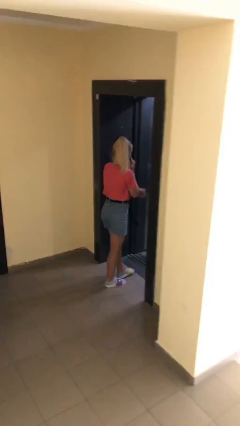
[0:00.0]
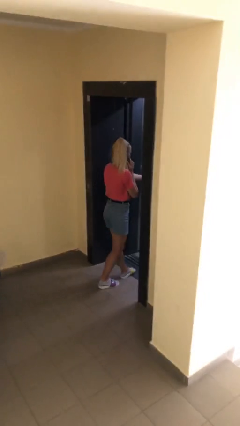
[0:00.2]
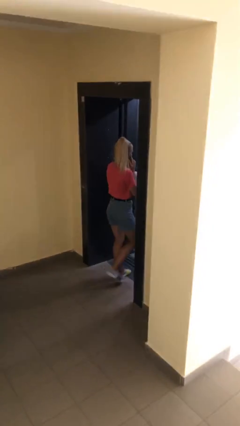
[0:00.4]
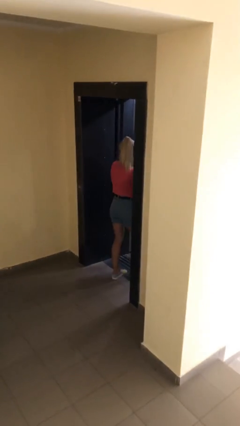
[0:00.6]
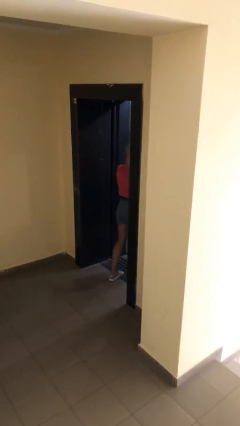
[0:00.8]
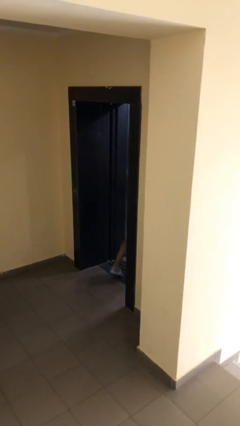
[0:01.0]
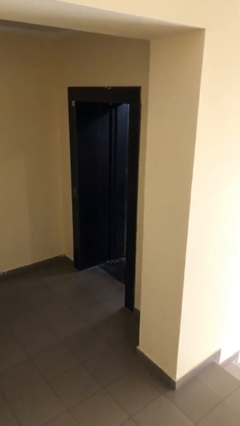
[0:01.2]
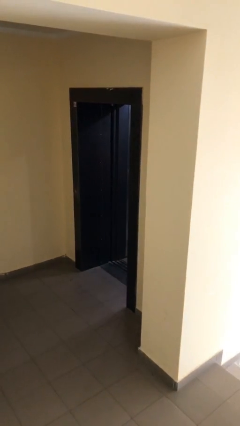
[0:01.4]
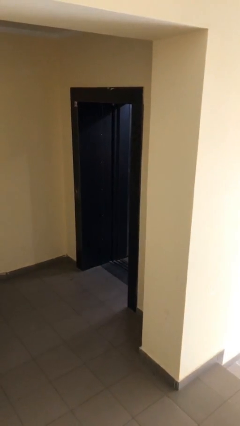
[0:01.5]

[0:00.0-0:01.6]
person exits scene through structure

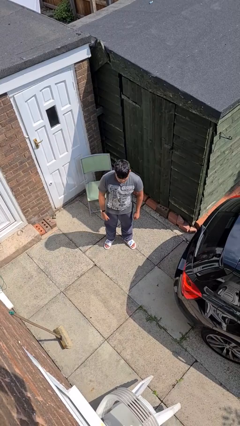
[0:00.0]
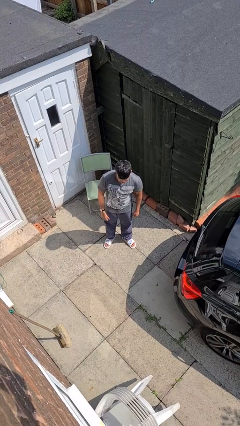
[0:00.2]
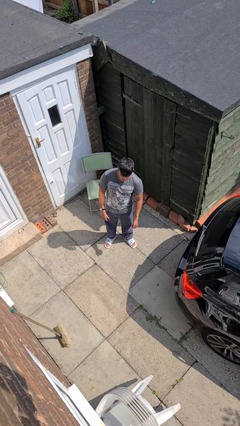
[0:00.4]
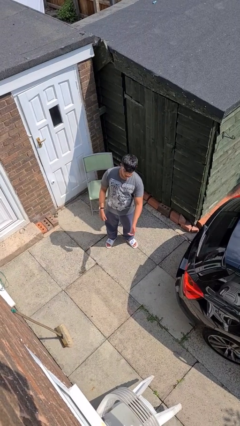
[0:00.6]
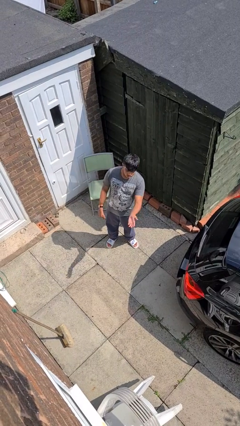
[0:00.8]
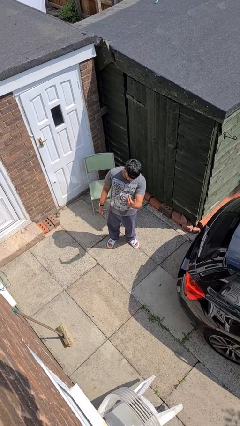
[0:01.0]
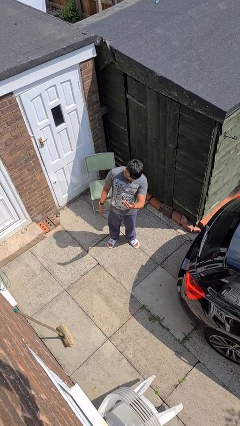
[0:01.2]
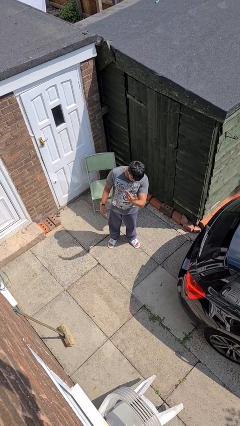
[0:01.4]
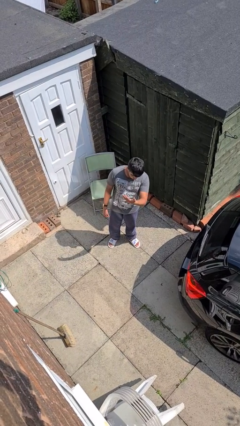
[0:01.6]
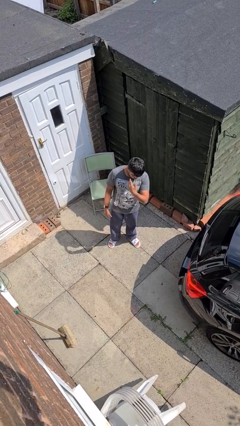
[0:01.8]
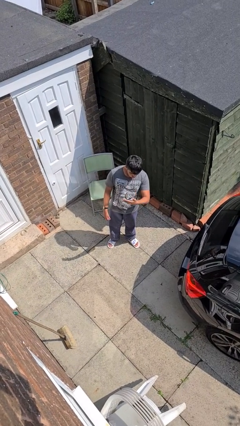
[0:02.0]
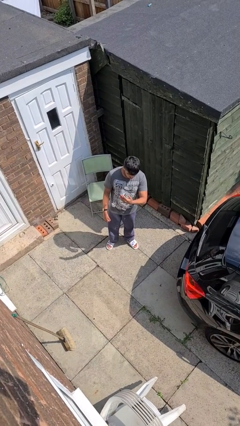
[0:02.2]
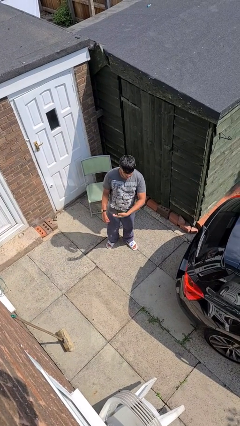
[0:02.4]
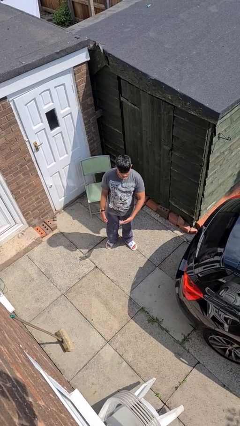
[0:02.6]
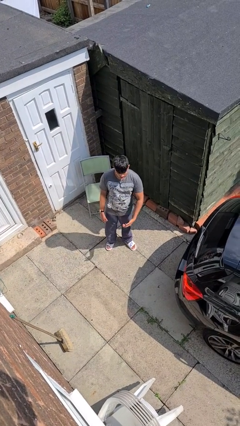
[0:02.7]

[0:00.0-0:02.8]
person gestures come here

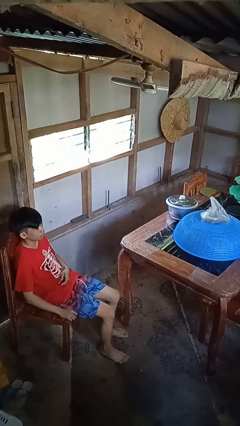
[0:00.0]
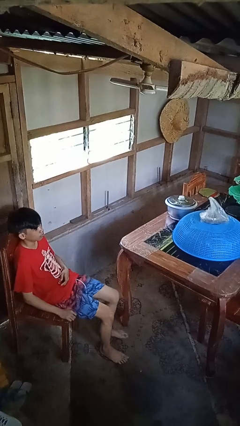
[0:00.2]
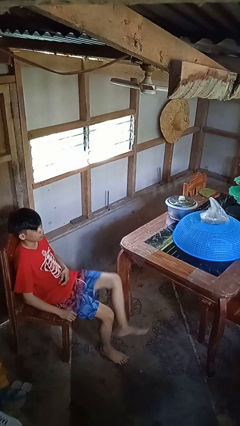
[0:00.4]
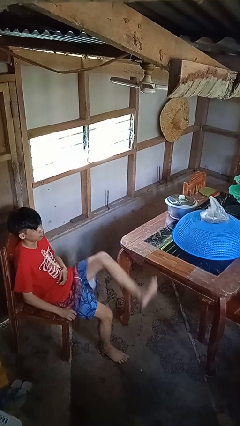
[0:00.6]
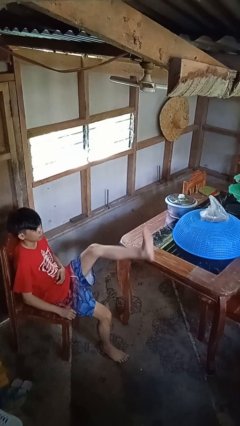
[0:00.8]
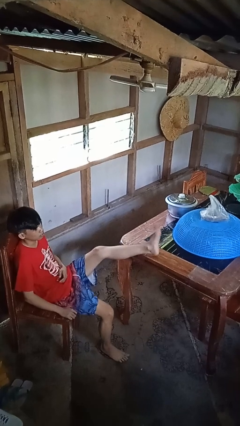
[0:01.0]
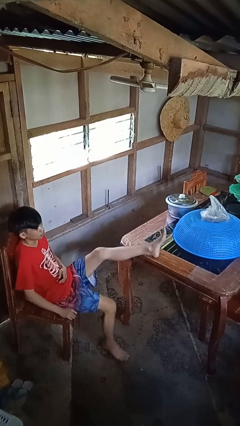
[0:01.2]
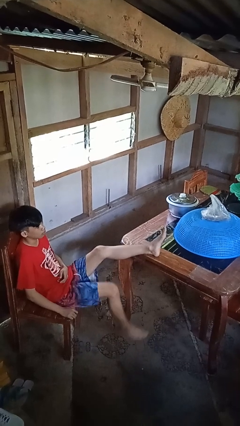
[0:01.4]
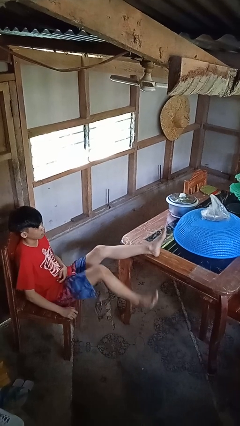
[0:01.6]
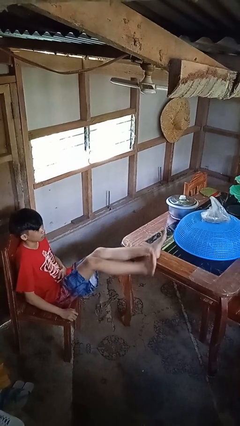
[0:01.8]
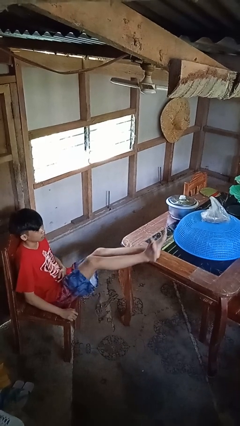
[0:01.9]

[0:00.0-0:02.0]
person puts feet up

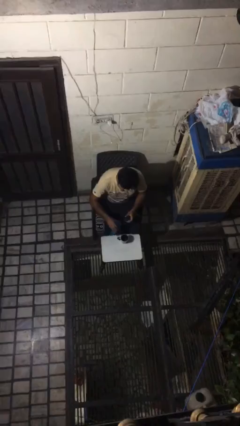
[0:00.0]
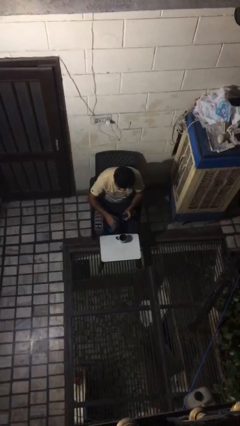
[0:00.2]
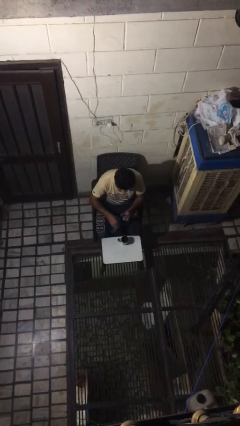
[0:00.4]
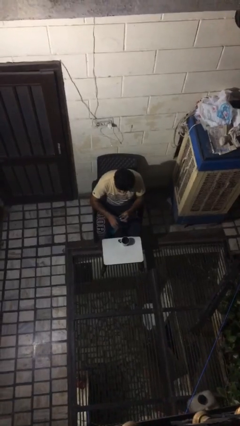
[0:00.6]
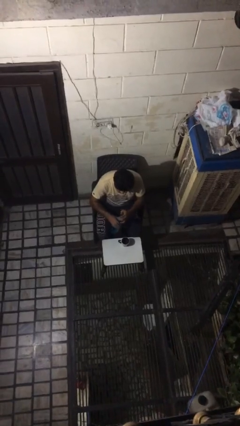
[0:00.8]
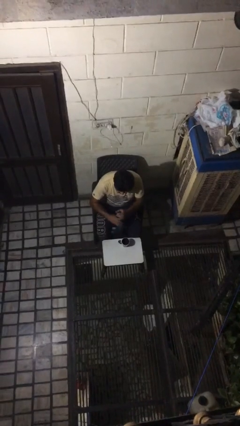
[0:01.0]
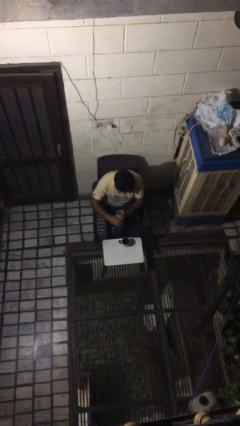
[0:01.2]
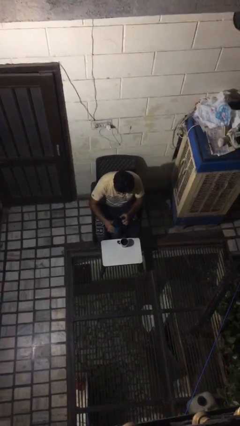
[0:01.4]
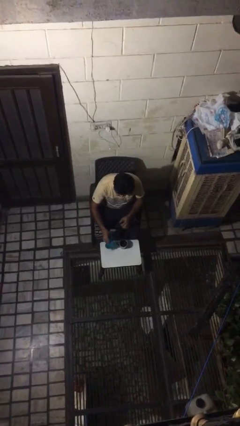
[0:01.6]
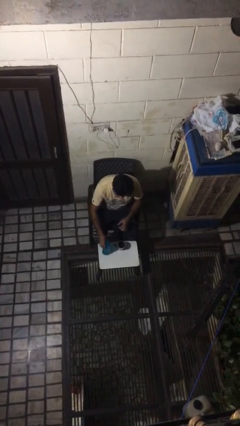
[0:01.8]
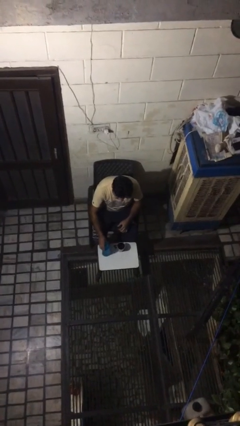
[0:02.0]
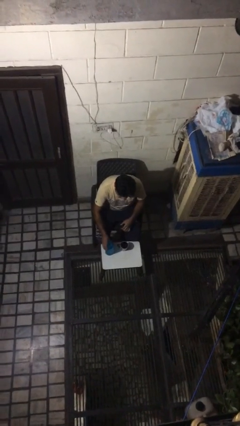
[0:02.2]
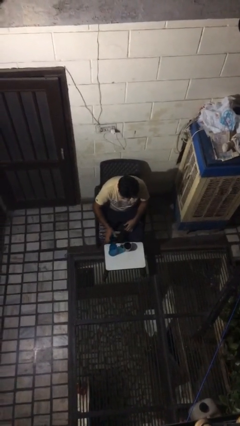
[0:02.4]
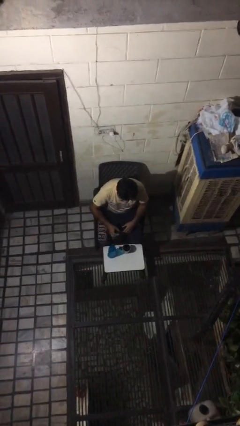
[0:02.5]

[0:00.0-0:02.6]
person screws lid to bottle

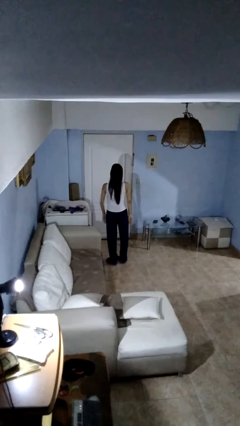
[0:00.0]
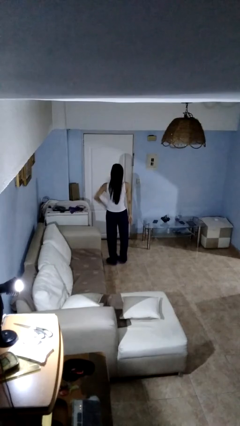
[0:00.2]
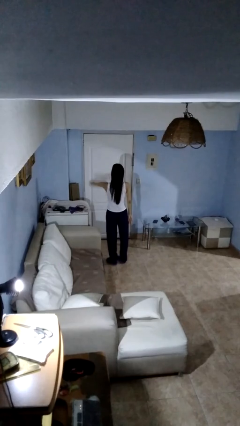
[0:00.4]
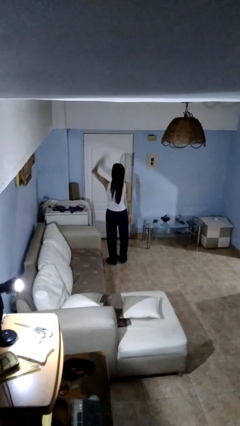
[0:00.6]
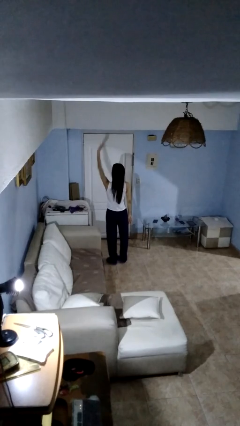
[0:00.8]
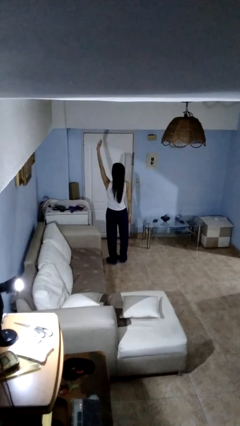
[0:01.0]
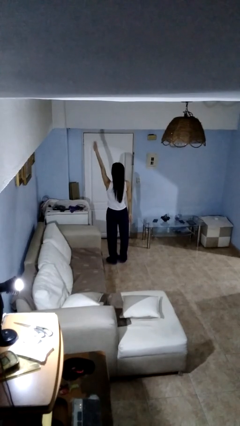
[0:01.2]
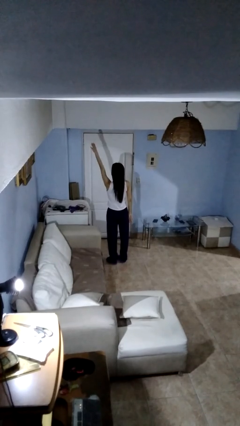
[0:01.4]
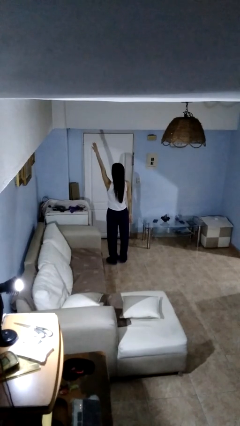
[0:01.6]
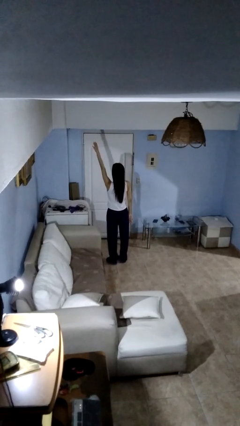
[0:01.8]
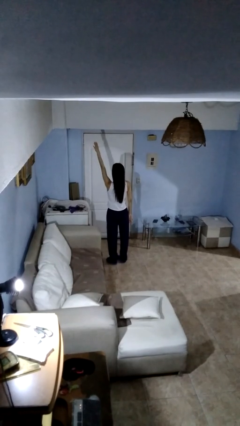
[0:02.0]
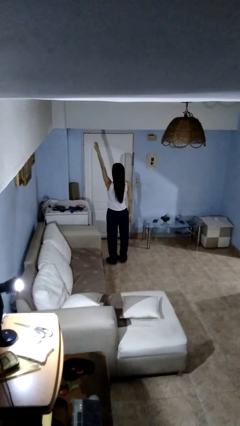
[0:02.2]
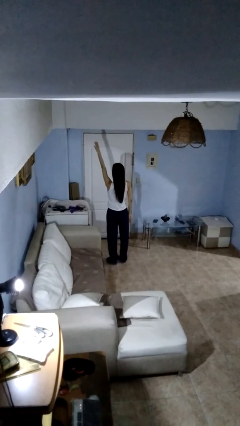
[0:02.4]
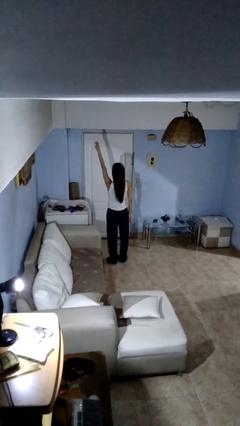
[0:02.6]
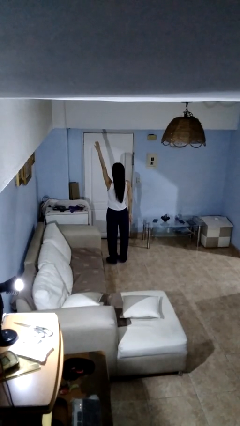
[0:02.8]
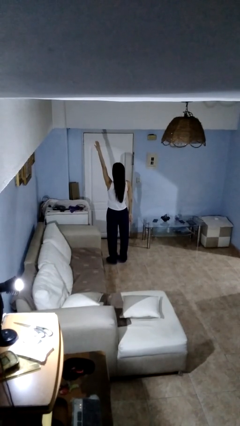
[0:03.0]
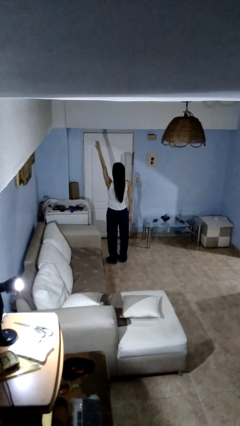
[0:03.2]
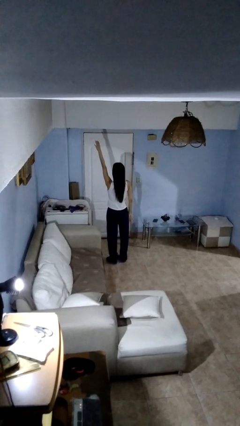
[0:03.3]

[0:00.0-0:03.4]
person gestures swipe up

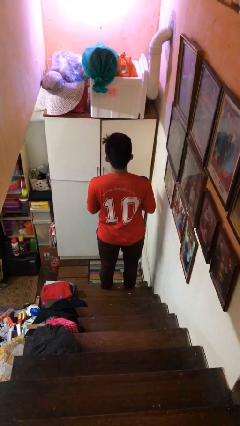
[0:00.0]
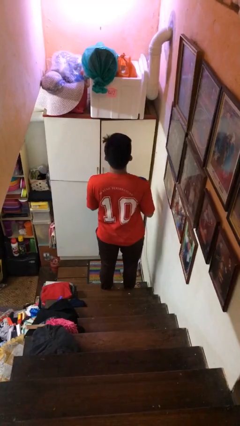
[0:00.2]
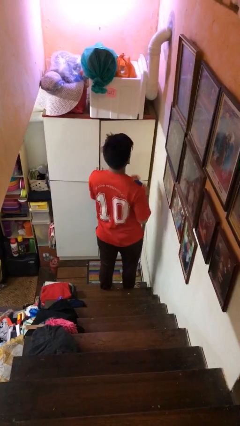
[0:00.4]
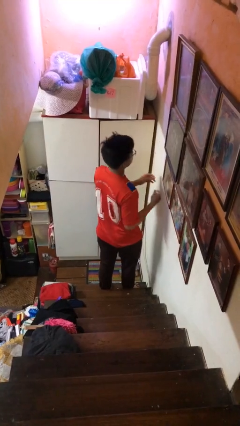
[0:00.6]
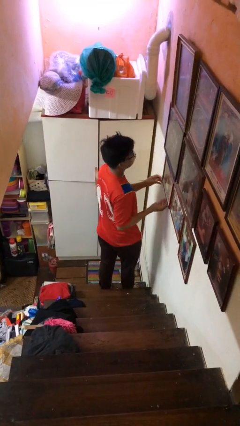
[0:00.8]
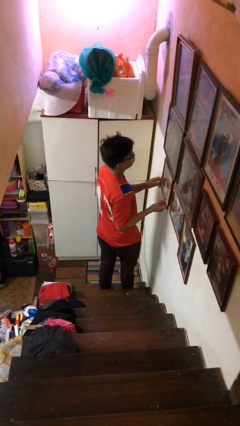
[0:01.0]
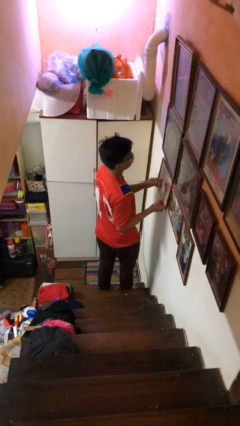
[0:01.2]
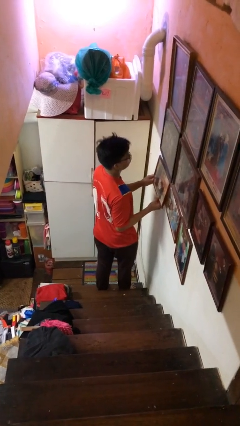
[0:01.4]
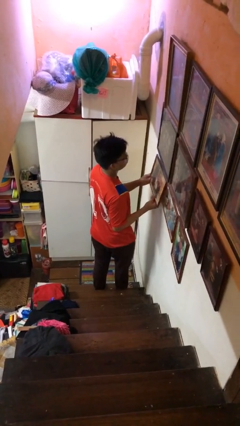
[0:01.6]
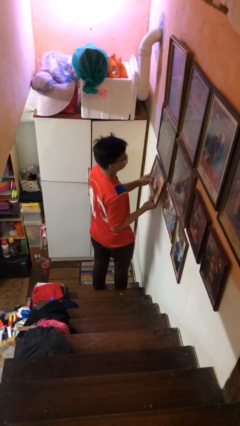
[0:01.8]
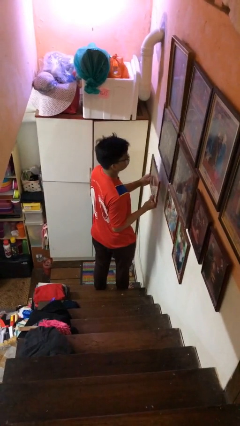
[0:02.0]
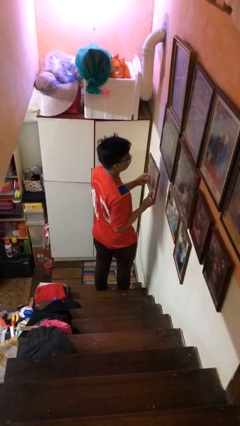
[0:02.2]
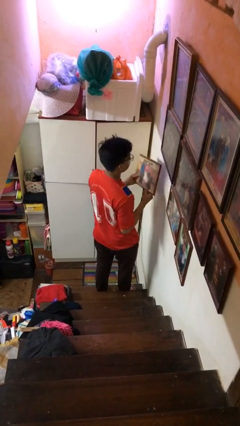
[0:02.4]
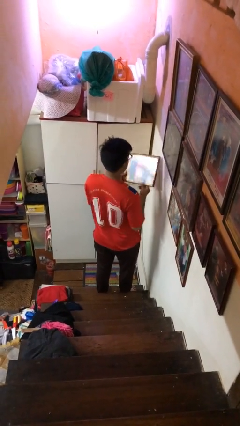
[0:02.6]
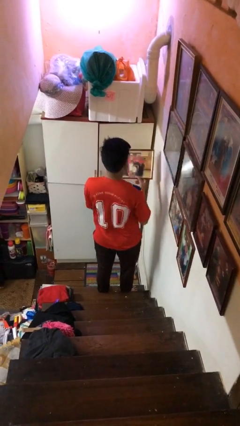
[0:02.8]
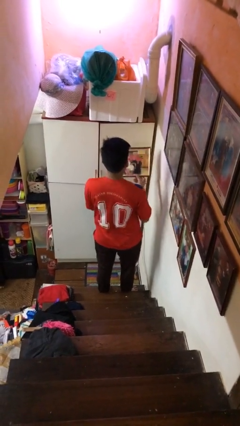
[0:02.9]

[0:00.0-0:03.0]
person takes down picture frame

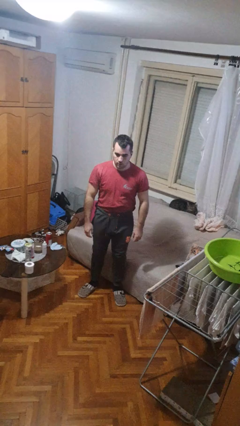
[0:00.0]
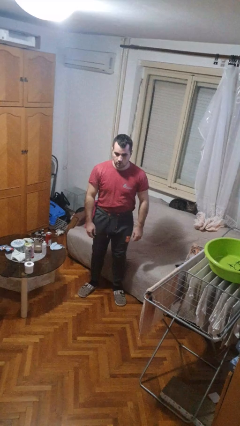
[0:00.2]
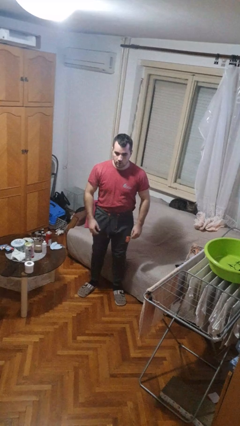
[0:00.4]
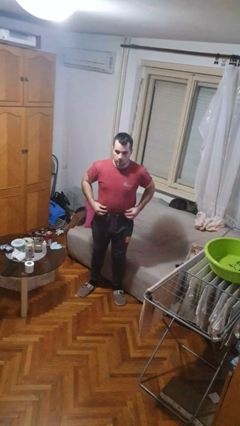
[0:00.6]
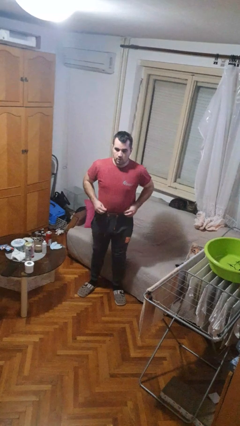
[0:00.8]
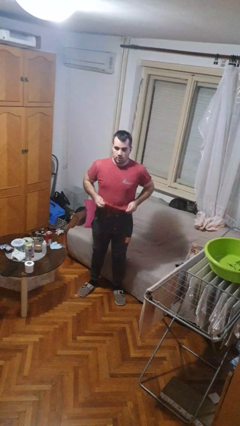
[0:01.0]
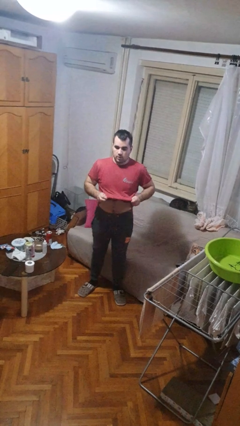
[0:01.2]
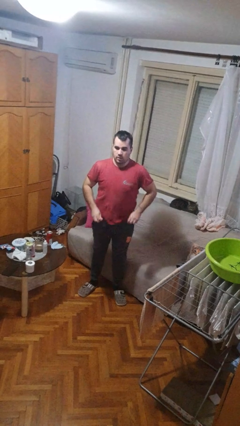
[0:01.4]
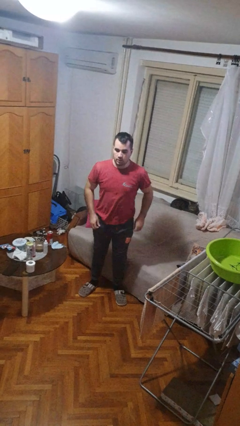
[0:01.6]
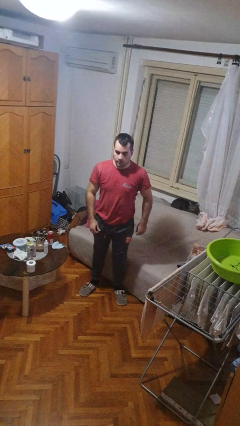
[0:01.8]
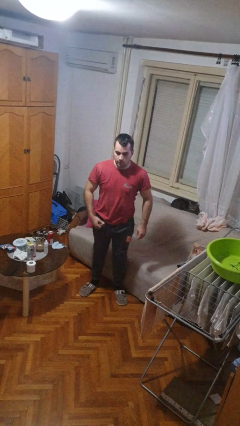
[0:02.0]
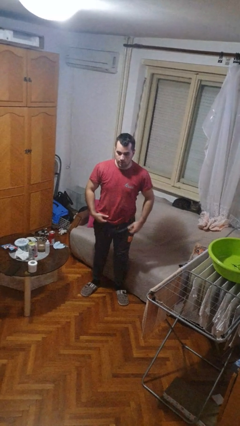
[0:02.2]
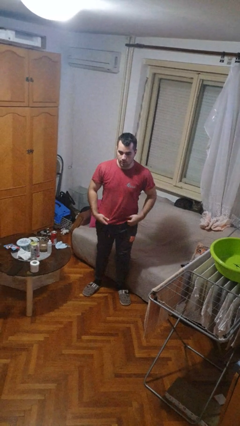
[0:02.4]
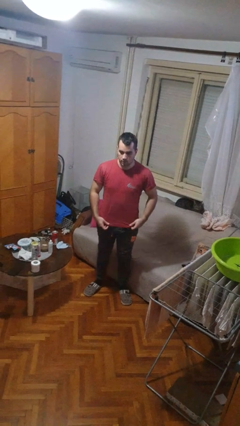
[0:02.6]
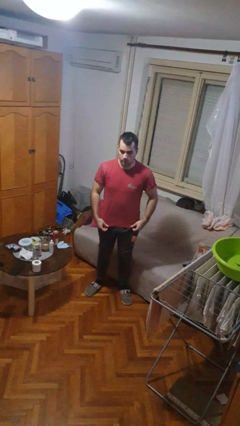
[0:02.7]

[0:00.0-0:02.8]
person untucks shirt
